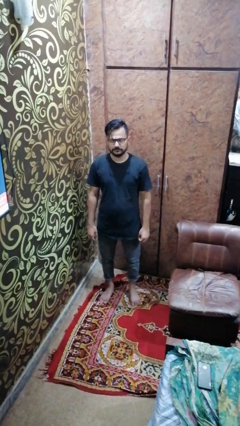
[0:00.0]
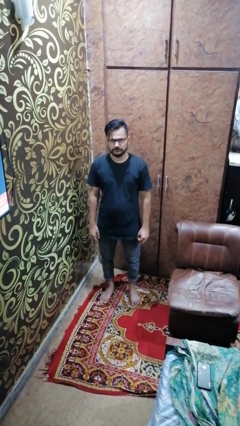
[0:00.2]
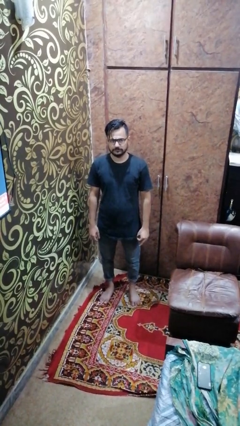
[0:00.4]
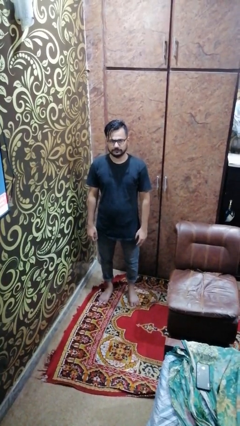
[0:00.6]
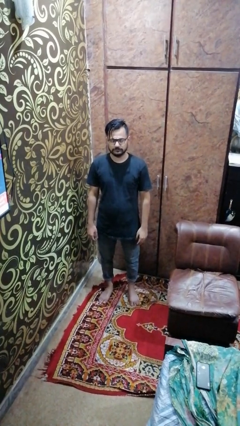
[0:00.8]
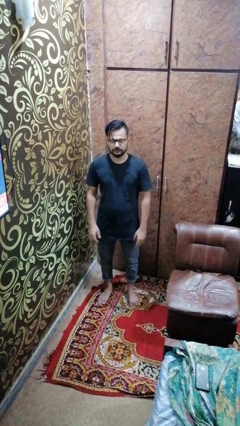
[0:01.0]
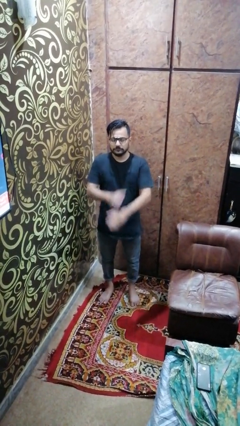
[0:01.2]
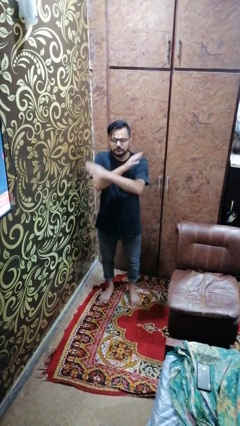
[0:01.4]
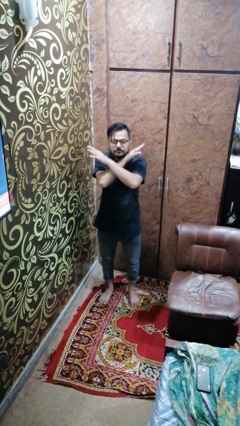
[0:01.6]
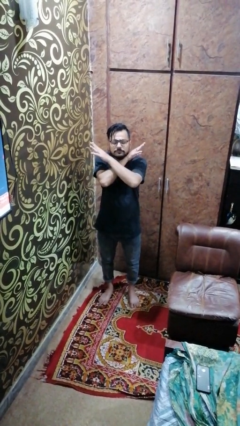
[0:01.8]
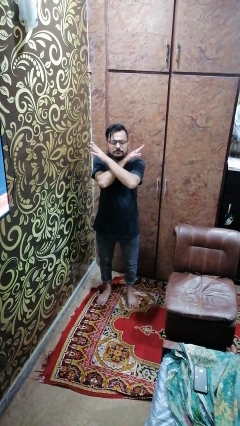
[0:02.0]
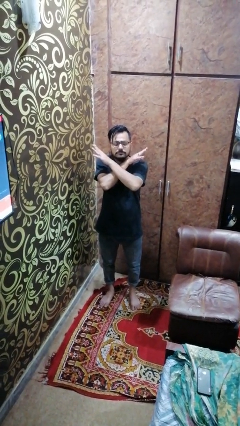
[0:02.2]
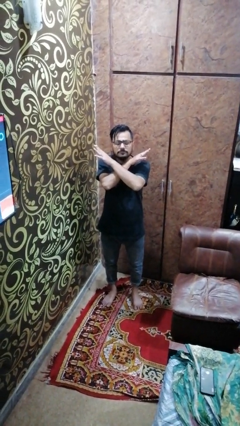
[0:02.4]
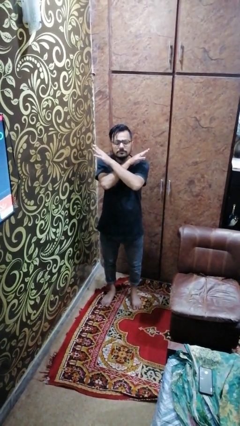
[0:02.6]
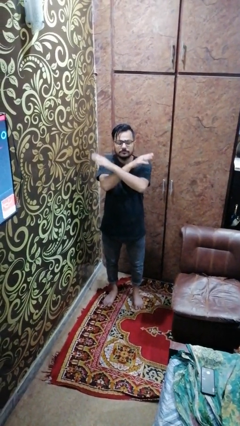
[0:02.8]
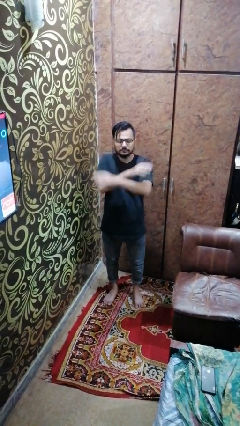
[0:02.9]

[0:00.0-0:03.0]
person crosses arms

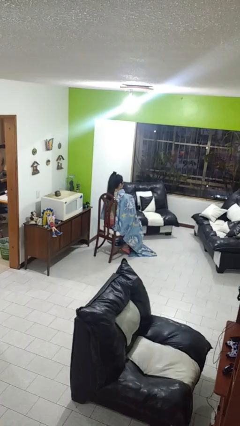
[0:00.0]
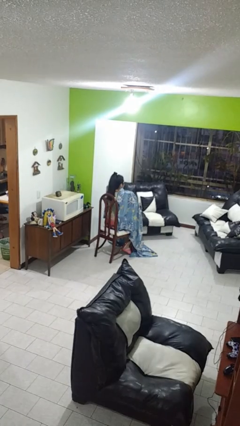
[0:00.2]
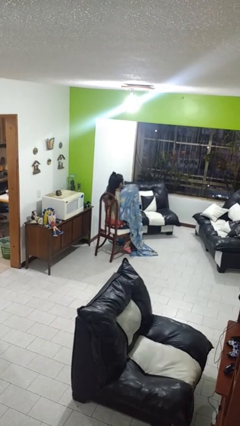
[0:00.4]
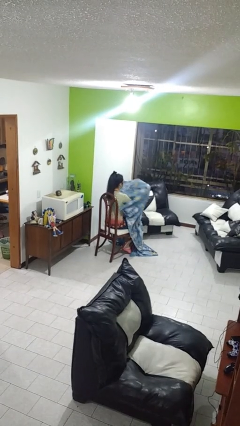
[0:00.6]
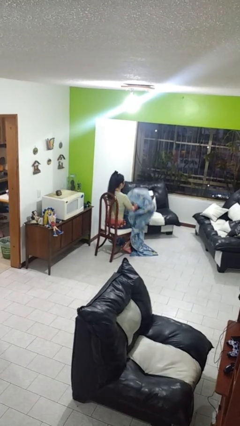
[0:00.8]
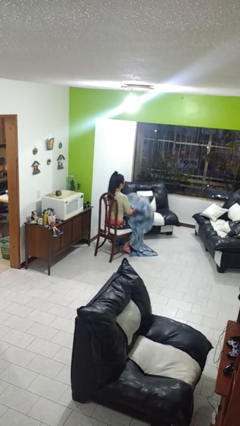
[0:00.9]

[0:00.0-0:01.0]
person uncovers with blanket

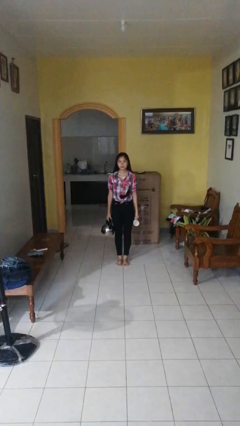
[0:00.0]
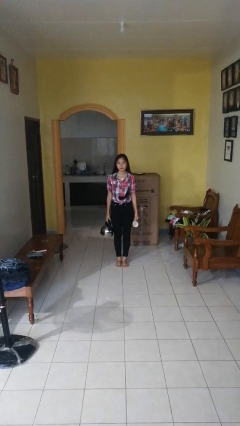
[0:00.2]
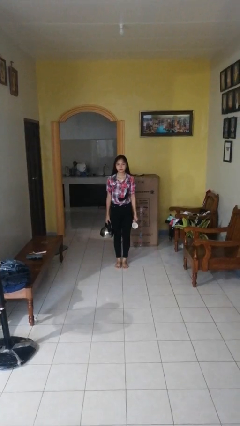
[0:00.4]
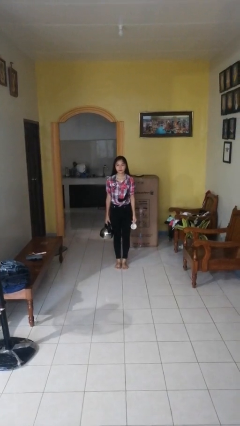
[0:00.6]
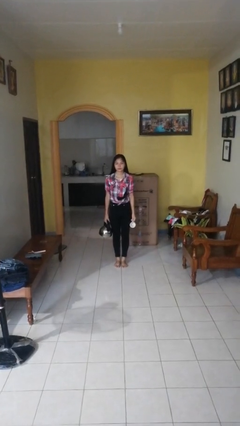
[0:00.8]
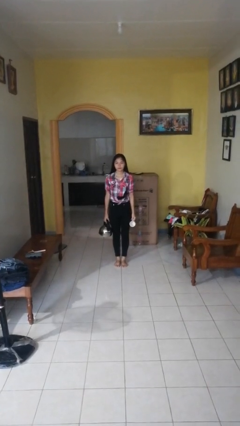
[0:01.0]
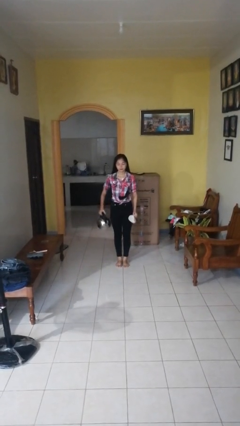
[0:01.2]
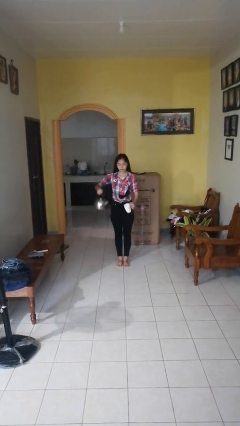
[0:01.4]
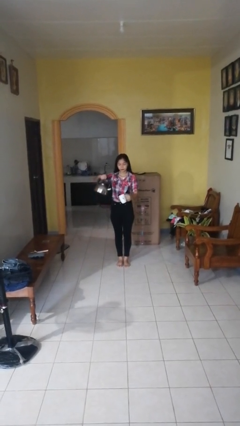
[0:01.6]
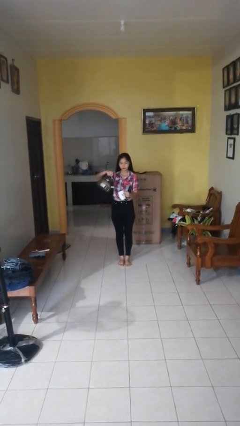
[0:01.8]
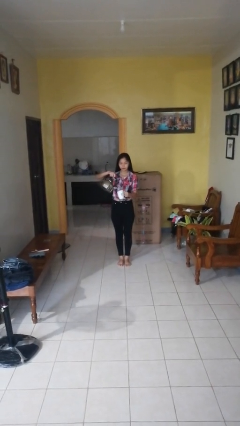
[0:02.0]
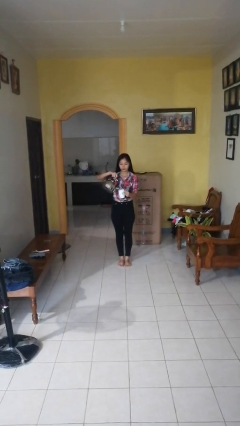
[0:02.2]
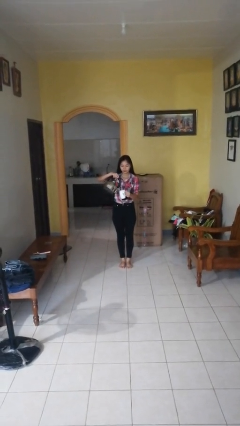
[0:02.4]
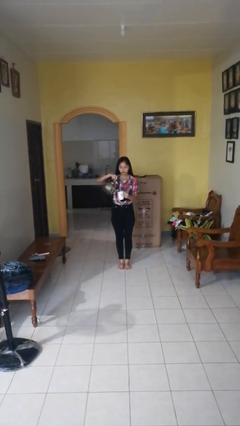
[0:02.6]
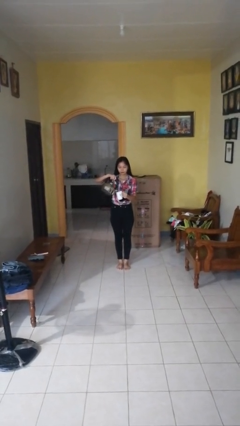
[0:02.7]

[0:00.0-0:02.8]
person pours coffee into mug

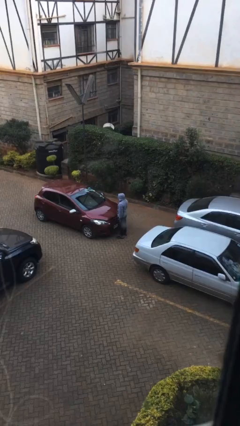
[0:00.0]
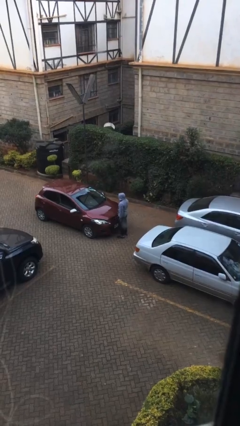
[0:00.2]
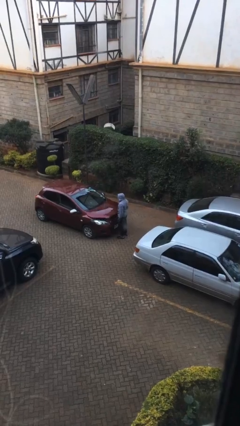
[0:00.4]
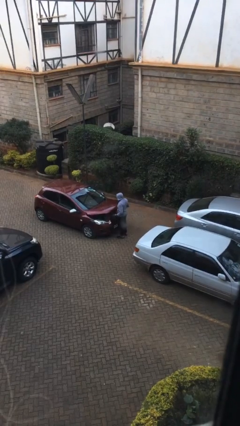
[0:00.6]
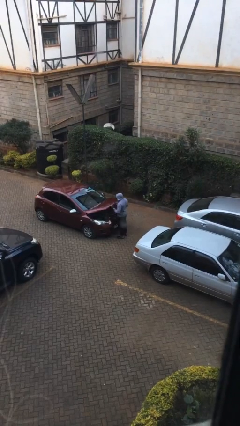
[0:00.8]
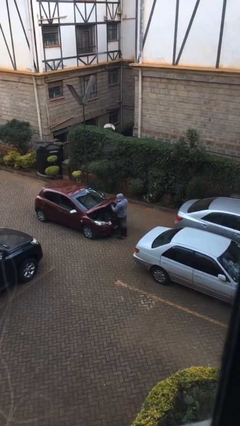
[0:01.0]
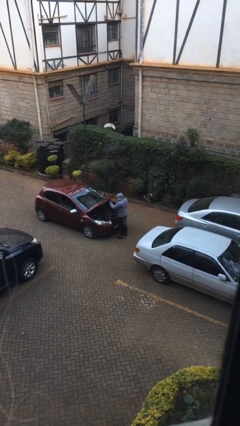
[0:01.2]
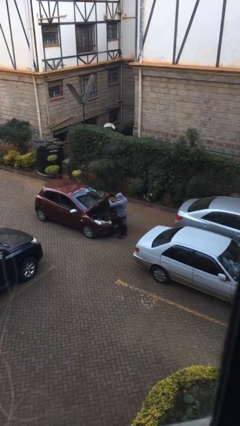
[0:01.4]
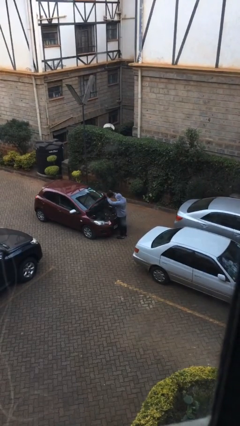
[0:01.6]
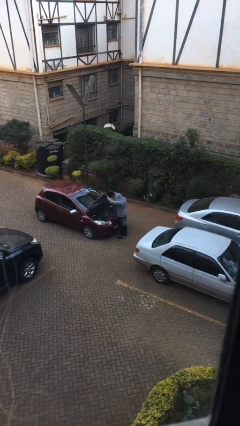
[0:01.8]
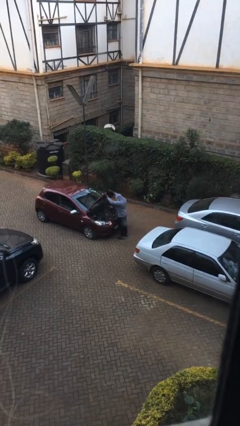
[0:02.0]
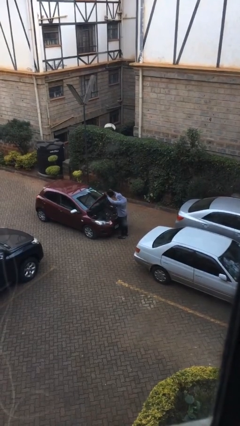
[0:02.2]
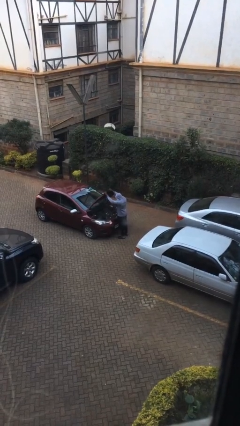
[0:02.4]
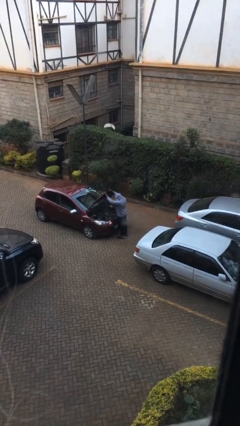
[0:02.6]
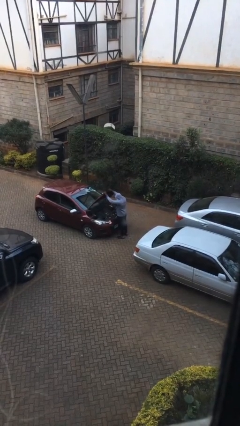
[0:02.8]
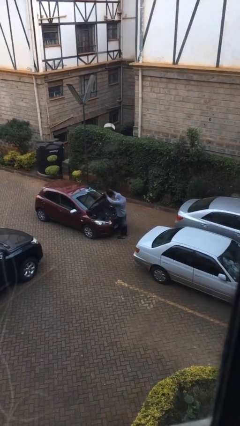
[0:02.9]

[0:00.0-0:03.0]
person opens car hood

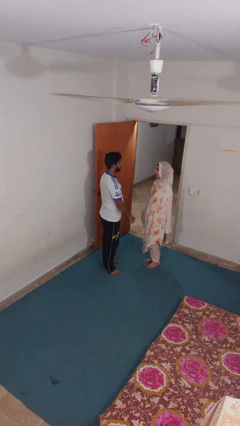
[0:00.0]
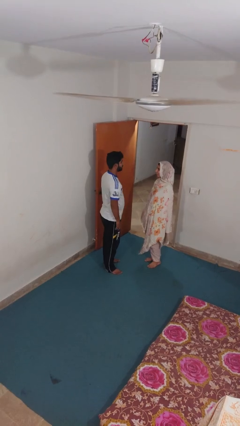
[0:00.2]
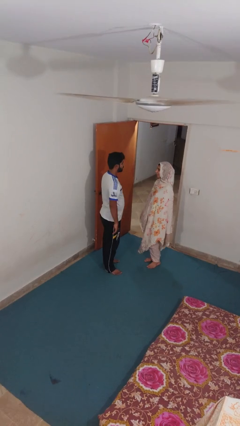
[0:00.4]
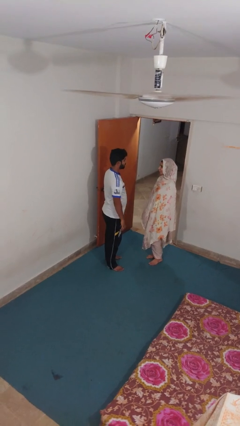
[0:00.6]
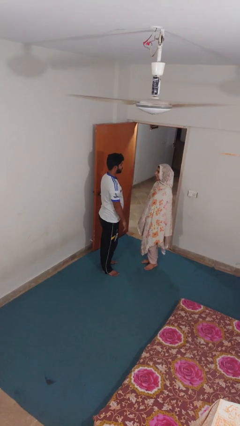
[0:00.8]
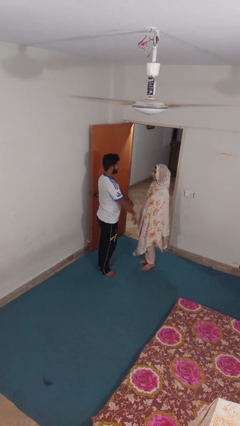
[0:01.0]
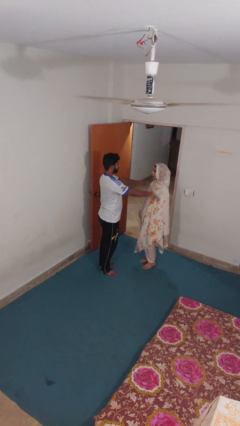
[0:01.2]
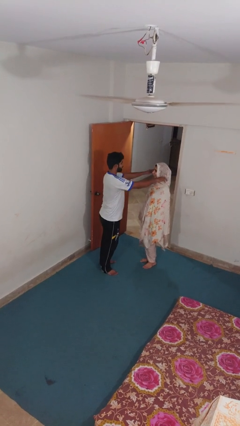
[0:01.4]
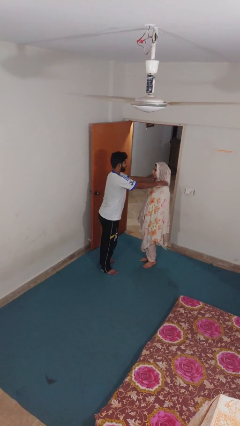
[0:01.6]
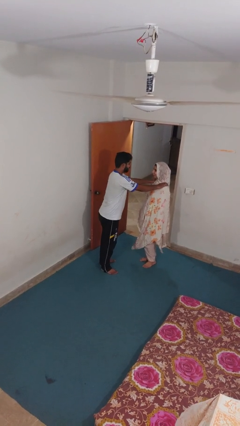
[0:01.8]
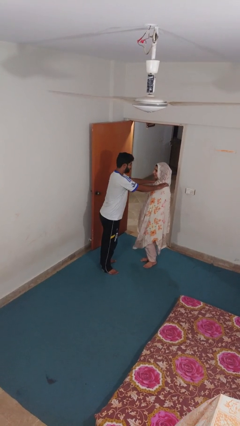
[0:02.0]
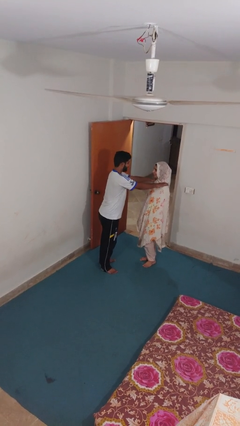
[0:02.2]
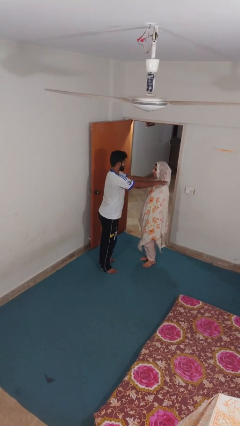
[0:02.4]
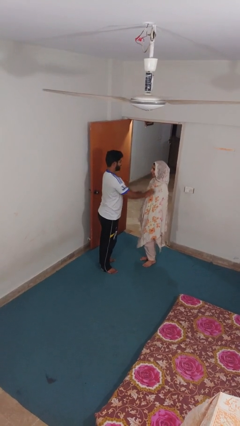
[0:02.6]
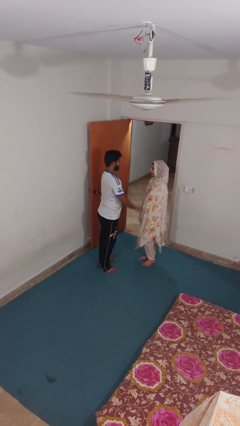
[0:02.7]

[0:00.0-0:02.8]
person pounds shoulders of person

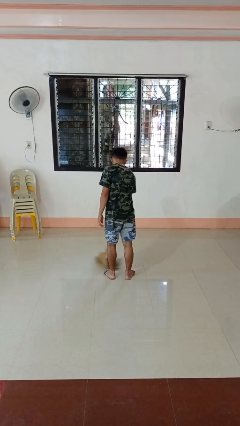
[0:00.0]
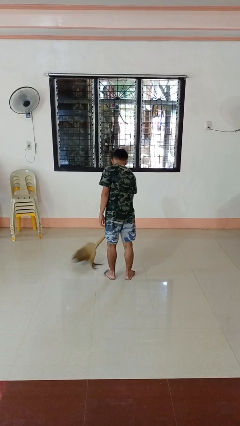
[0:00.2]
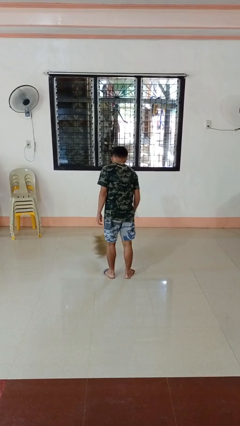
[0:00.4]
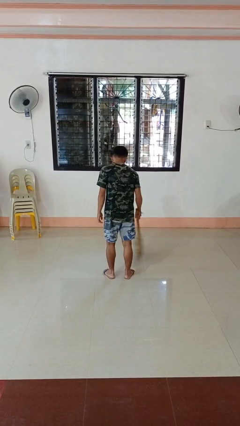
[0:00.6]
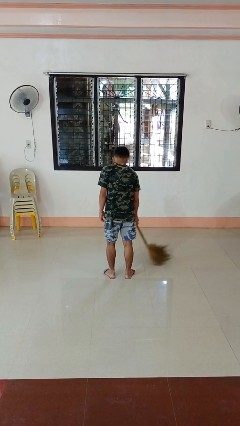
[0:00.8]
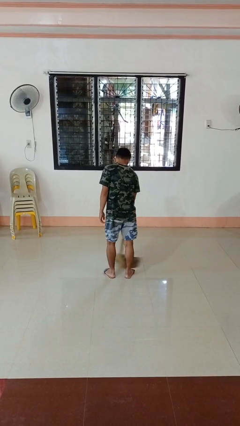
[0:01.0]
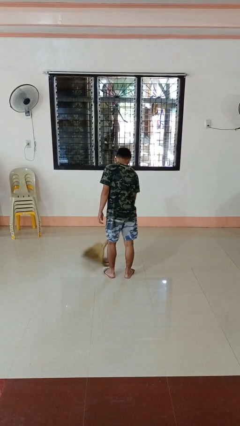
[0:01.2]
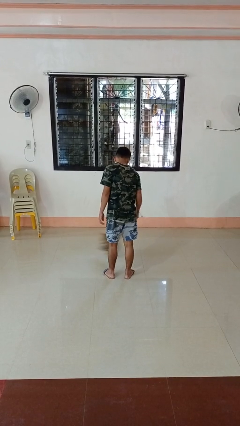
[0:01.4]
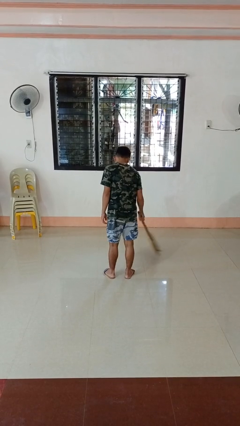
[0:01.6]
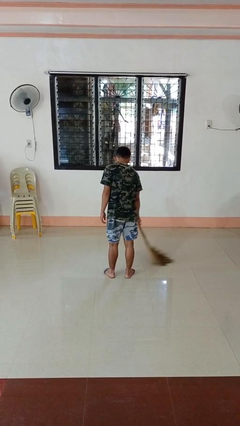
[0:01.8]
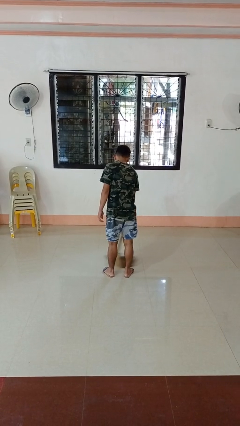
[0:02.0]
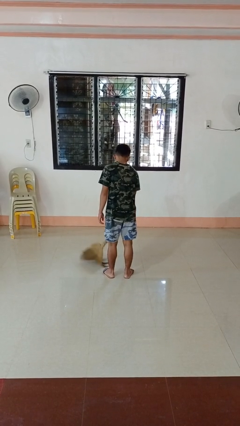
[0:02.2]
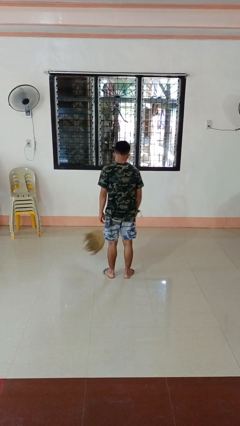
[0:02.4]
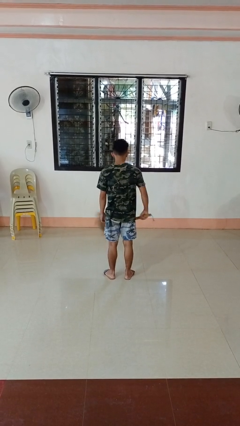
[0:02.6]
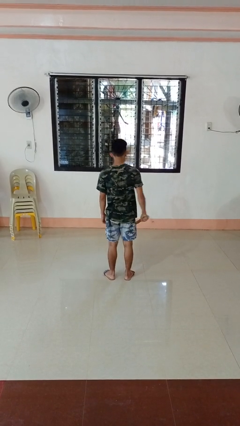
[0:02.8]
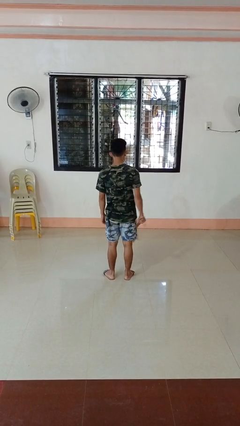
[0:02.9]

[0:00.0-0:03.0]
person sweeps floor

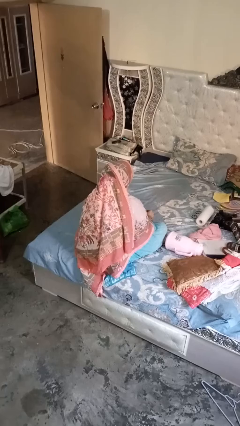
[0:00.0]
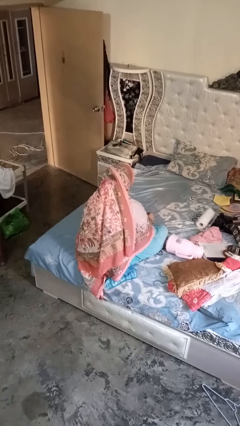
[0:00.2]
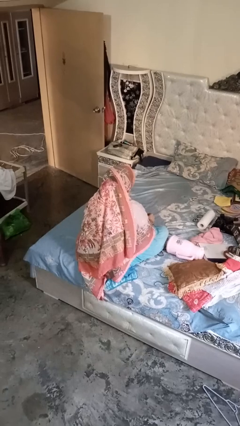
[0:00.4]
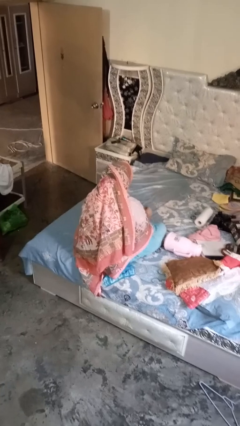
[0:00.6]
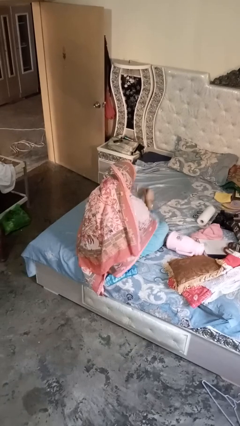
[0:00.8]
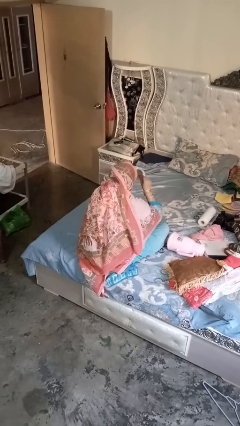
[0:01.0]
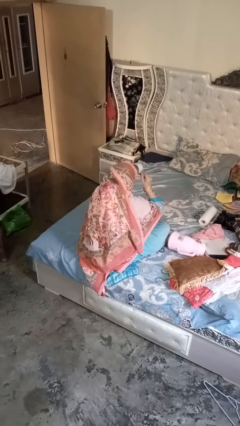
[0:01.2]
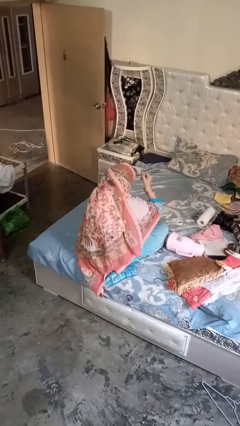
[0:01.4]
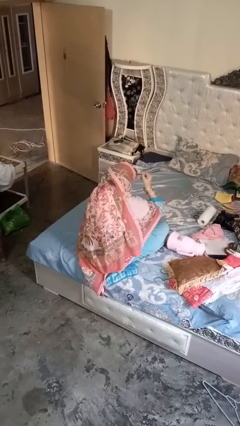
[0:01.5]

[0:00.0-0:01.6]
person drinks from mug
